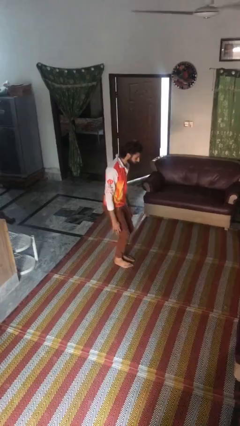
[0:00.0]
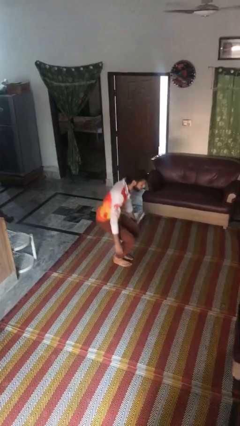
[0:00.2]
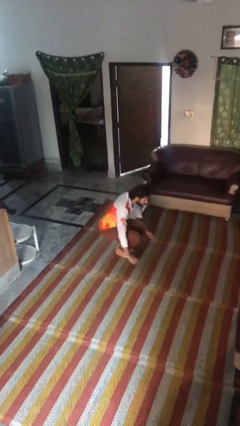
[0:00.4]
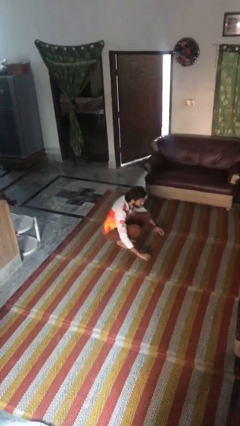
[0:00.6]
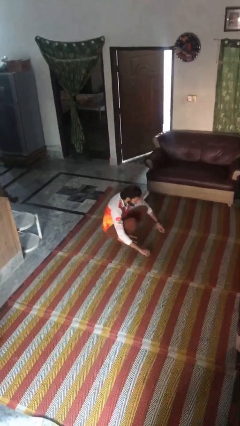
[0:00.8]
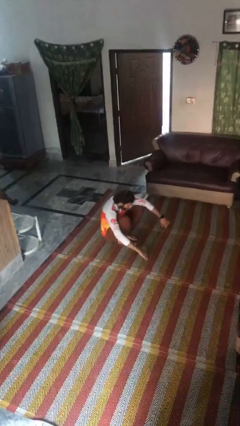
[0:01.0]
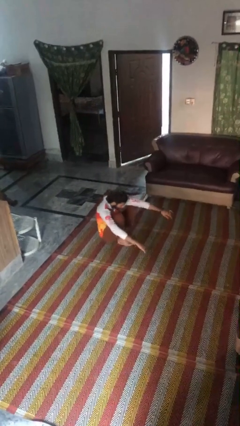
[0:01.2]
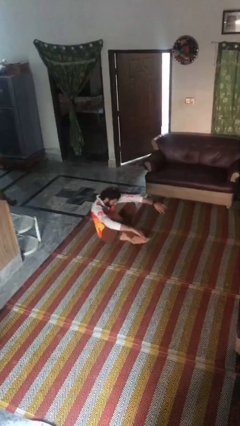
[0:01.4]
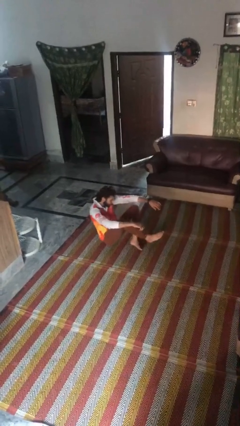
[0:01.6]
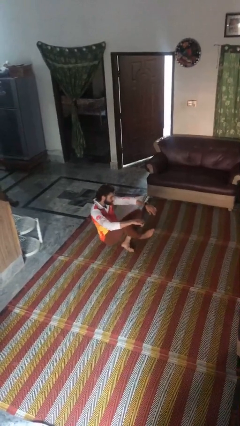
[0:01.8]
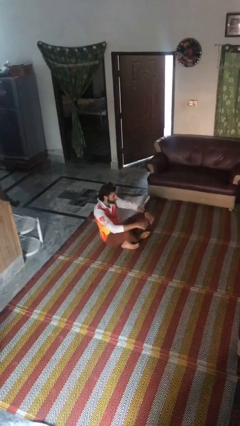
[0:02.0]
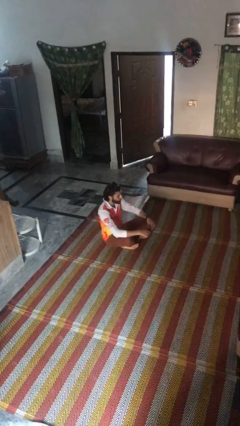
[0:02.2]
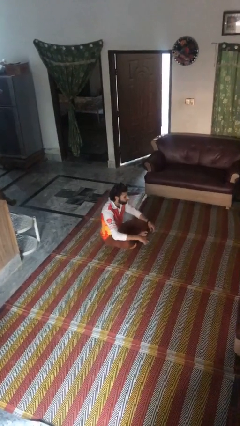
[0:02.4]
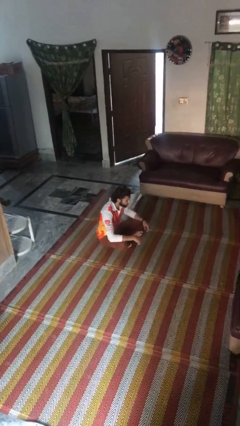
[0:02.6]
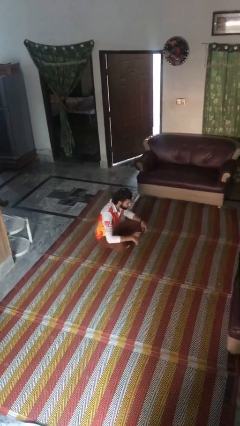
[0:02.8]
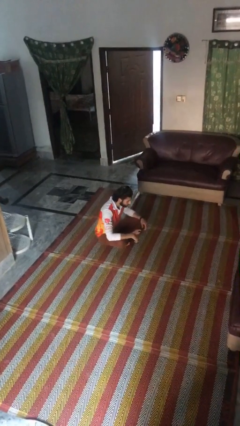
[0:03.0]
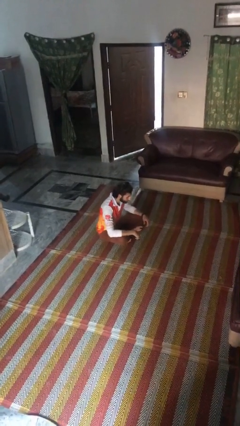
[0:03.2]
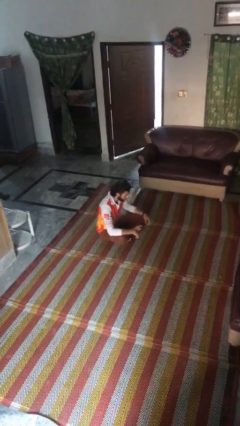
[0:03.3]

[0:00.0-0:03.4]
person sits crisscross

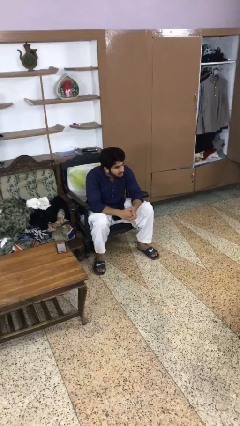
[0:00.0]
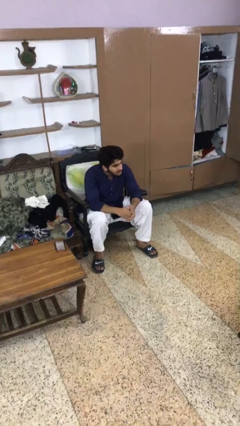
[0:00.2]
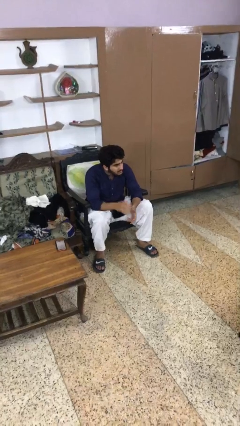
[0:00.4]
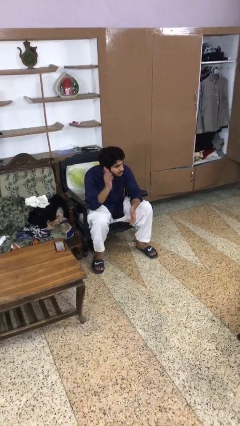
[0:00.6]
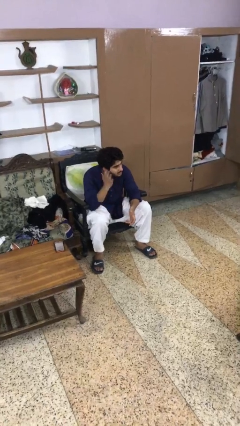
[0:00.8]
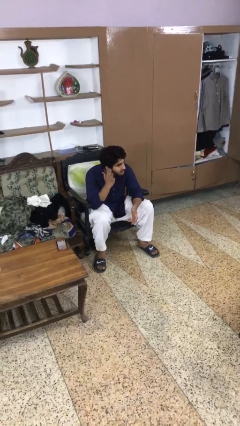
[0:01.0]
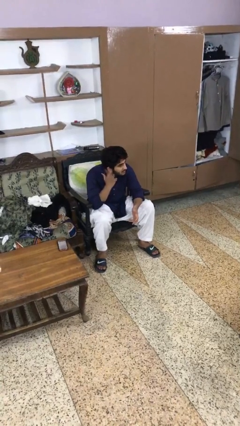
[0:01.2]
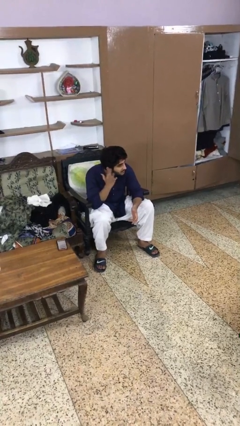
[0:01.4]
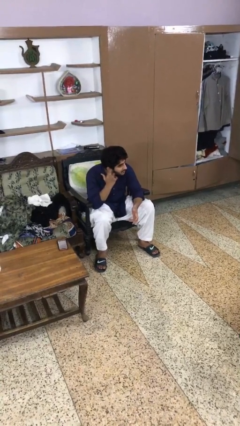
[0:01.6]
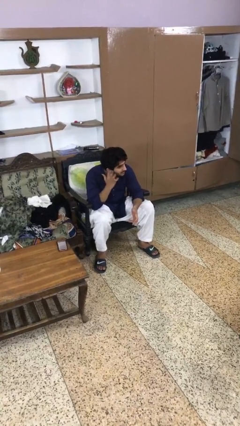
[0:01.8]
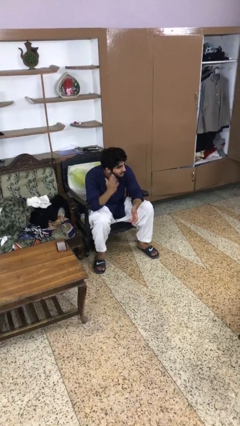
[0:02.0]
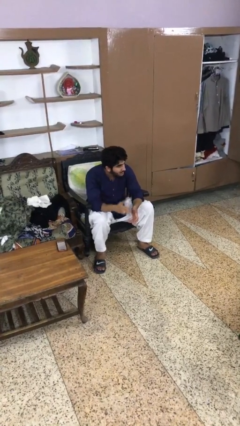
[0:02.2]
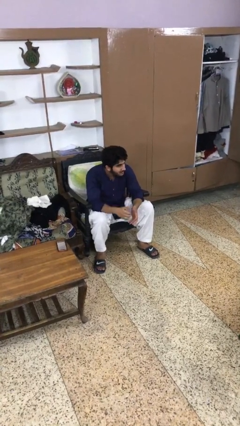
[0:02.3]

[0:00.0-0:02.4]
person puts fingers in ear

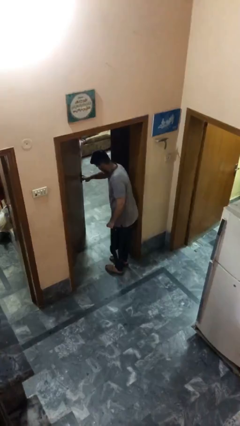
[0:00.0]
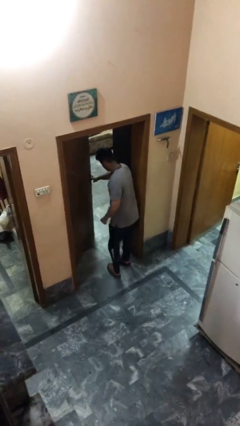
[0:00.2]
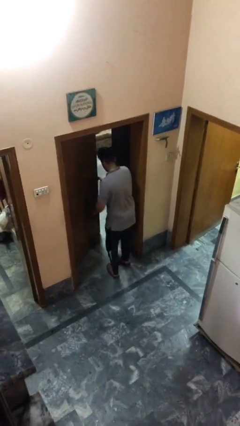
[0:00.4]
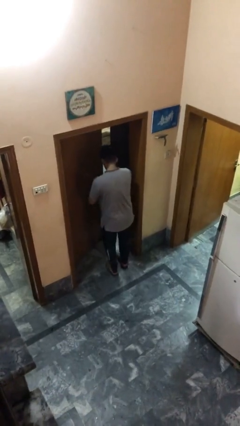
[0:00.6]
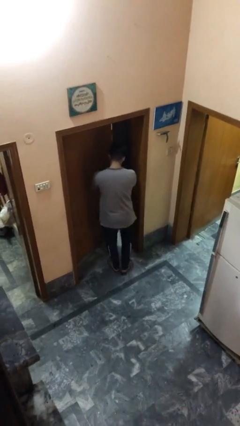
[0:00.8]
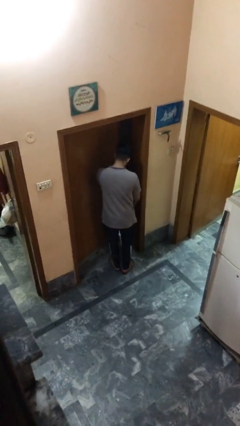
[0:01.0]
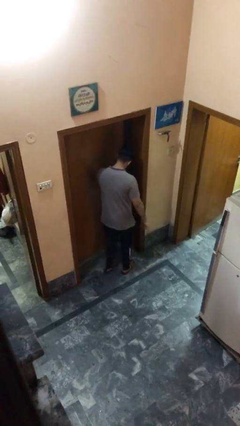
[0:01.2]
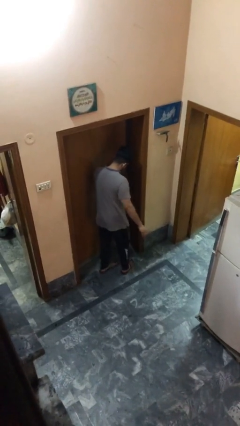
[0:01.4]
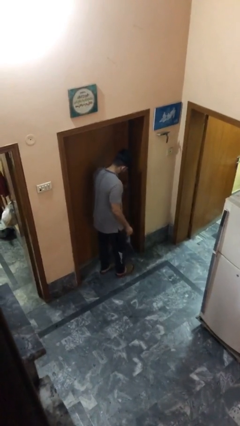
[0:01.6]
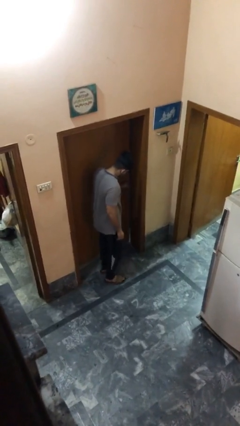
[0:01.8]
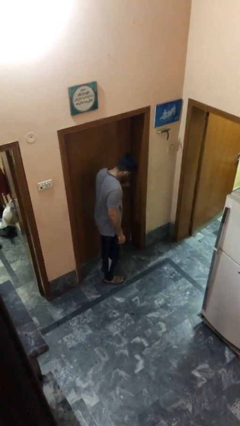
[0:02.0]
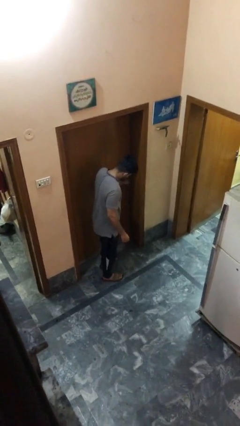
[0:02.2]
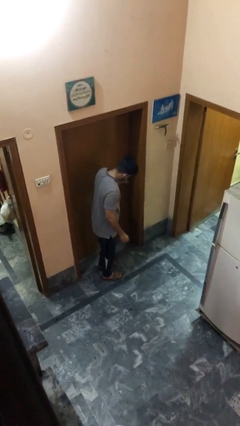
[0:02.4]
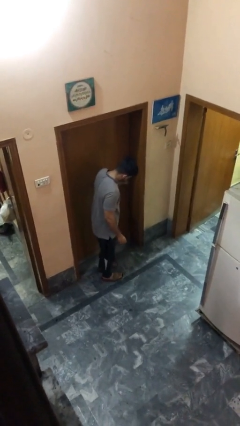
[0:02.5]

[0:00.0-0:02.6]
person closes facility door

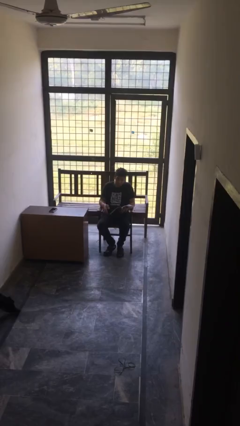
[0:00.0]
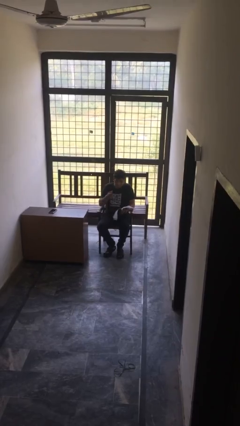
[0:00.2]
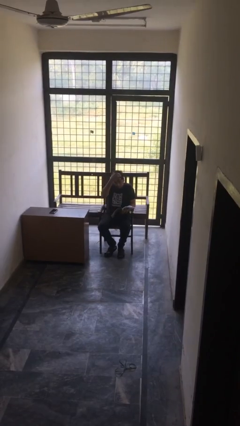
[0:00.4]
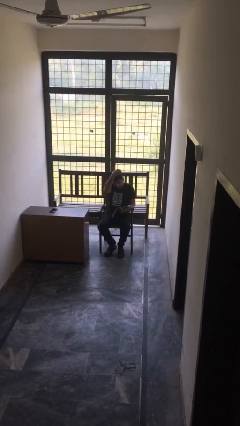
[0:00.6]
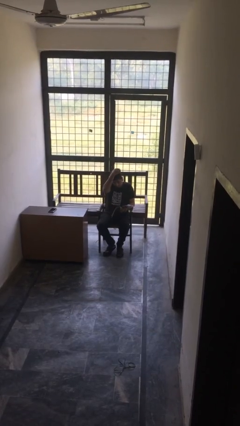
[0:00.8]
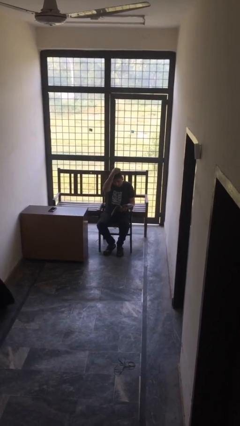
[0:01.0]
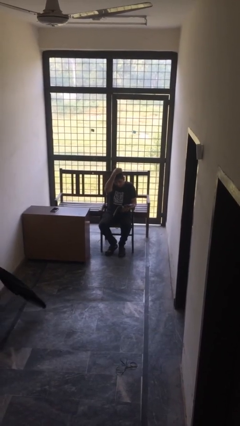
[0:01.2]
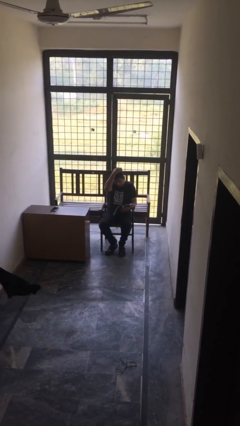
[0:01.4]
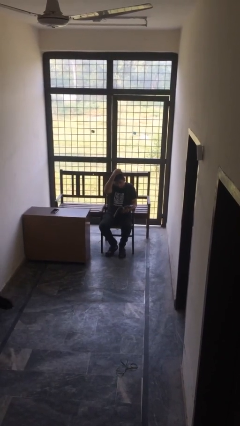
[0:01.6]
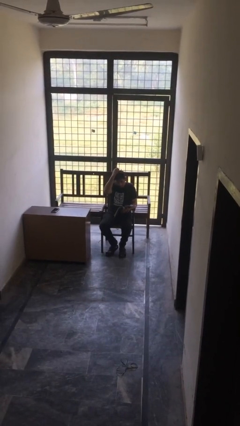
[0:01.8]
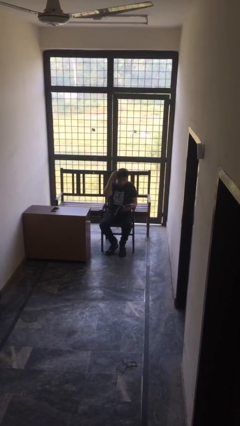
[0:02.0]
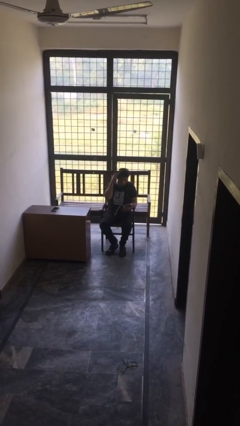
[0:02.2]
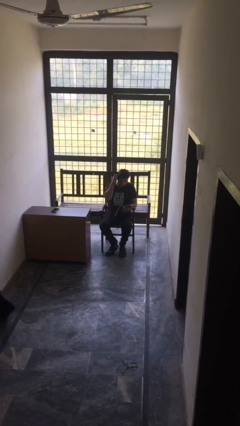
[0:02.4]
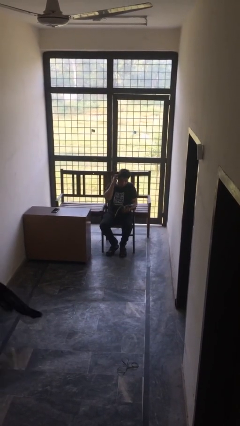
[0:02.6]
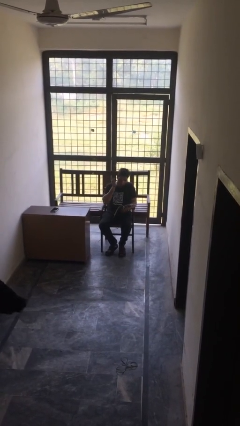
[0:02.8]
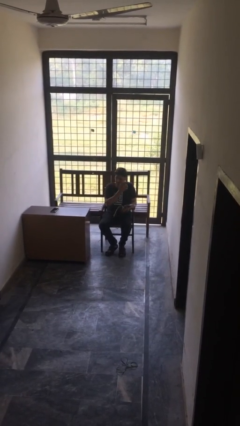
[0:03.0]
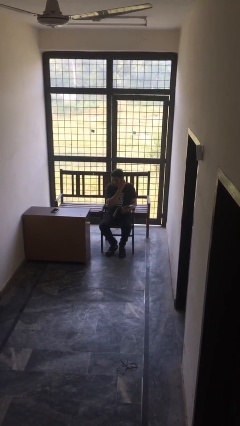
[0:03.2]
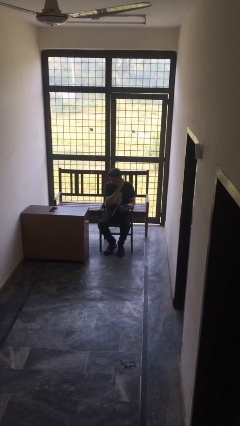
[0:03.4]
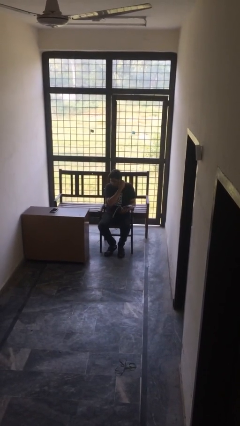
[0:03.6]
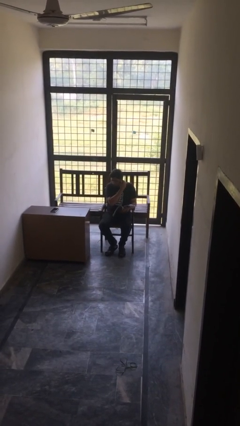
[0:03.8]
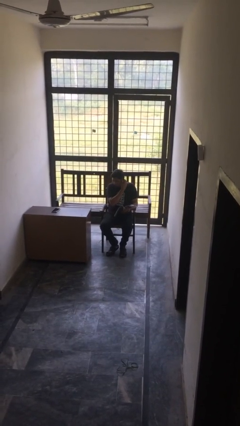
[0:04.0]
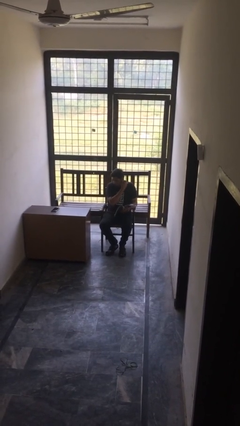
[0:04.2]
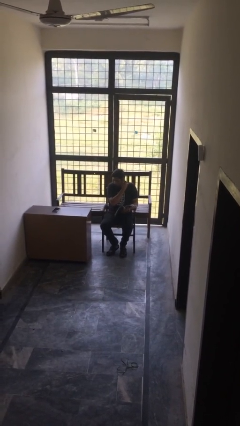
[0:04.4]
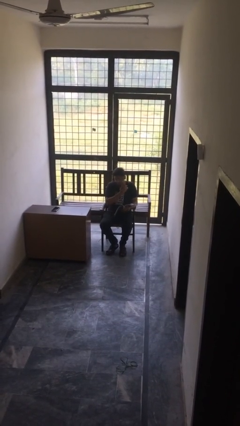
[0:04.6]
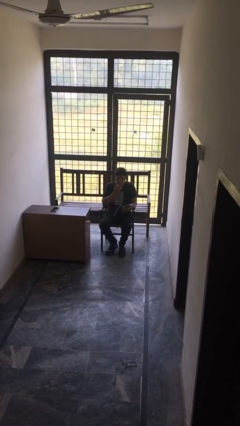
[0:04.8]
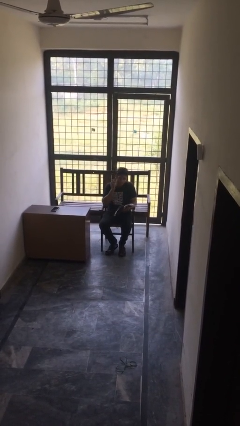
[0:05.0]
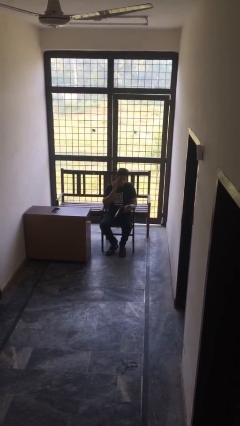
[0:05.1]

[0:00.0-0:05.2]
person reads document

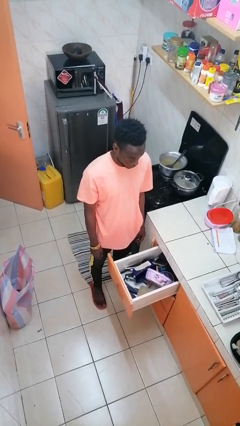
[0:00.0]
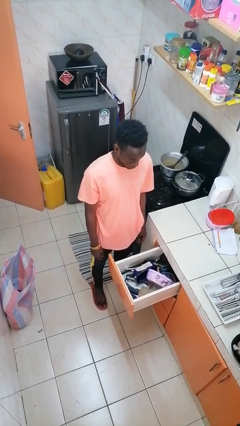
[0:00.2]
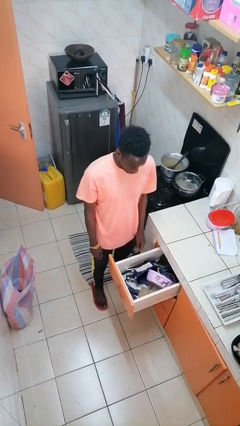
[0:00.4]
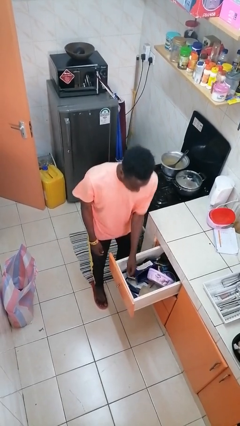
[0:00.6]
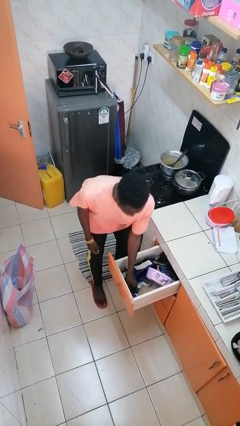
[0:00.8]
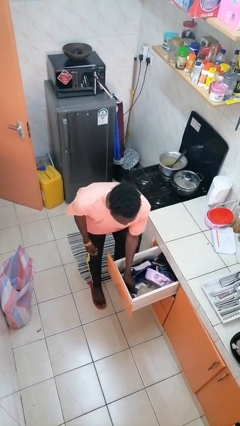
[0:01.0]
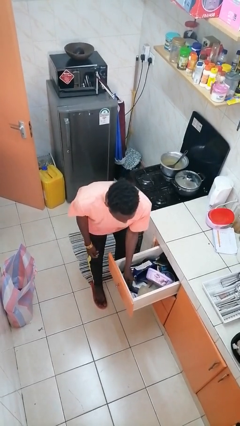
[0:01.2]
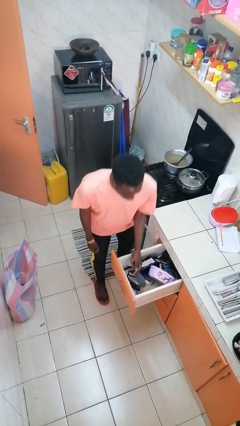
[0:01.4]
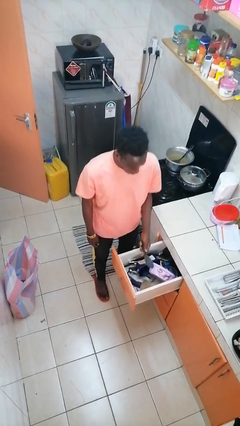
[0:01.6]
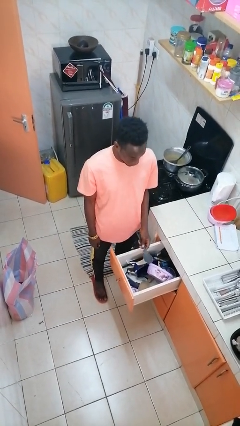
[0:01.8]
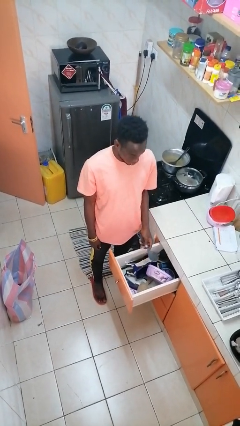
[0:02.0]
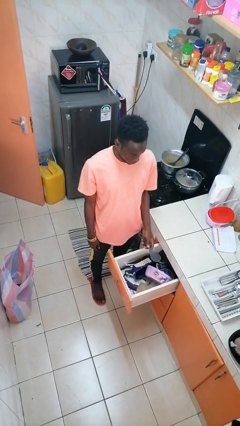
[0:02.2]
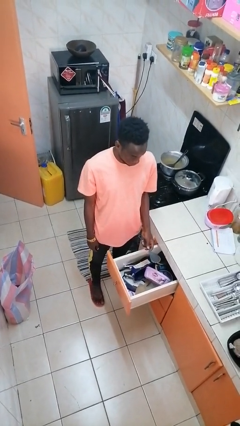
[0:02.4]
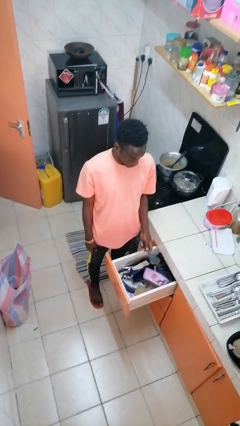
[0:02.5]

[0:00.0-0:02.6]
person takes object from kitchen drawer

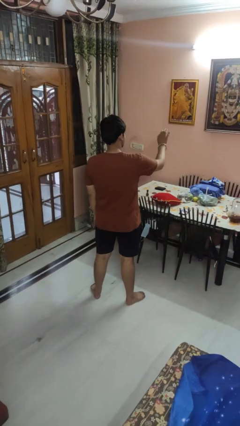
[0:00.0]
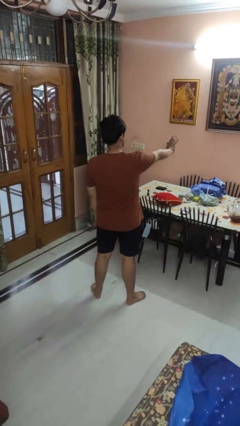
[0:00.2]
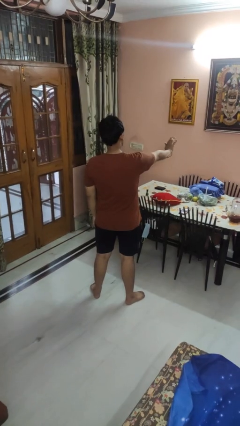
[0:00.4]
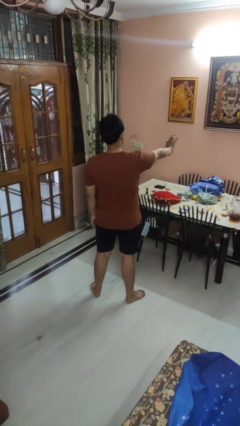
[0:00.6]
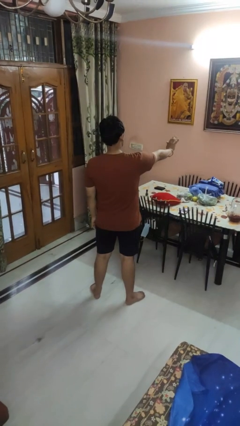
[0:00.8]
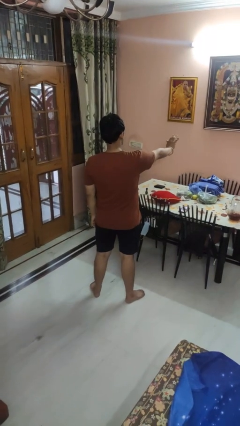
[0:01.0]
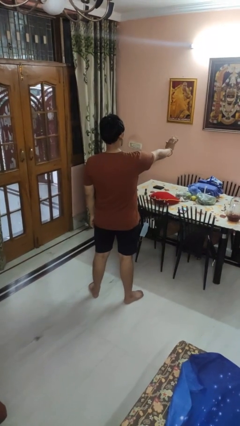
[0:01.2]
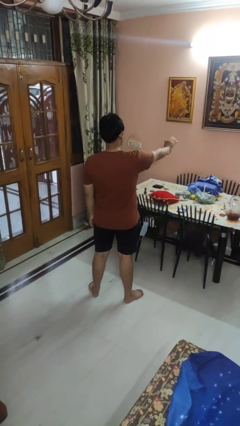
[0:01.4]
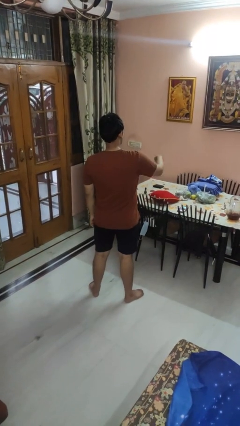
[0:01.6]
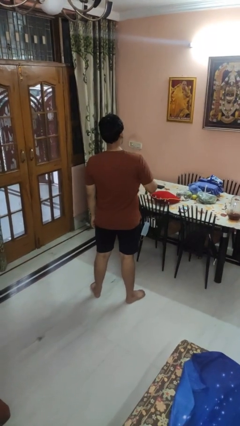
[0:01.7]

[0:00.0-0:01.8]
person gestures stop
